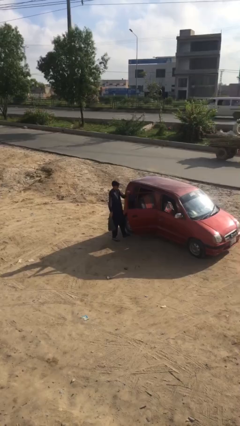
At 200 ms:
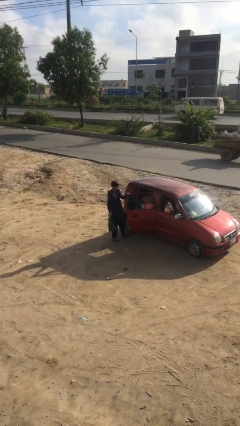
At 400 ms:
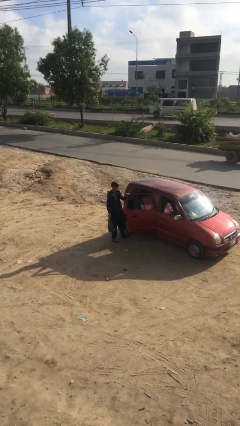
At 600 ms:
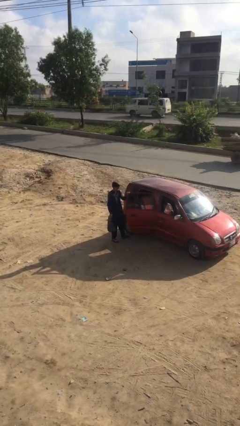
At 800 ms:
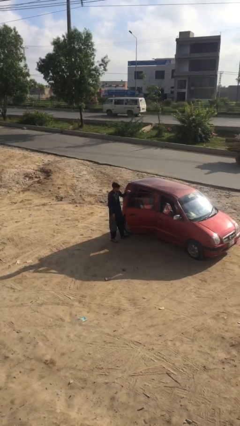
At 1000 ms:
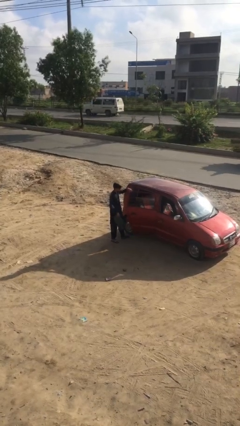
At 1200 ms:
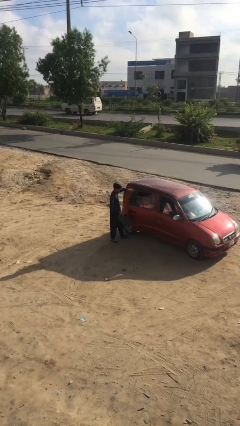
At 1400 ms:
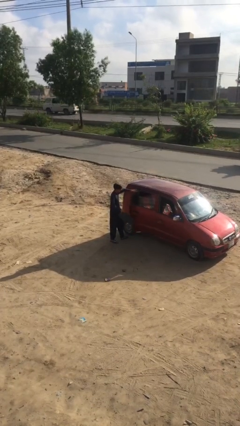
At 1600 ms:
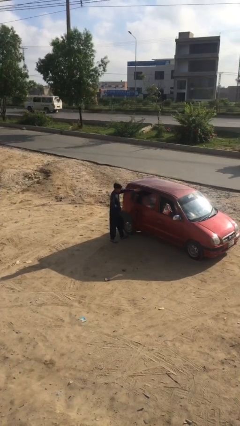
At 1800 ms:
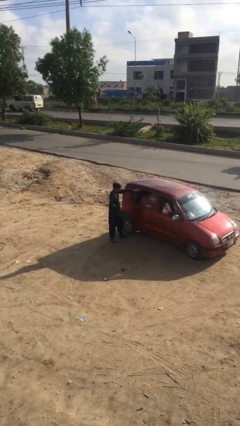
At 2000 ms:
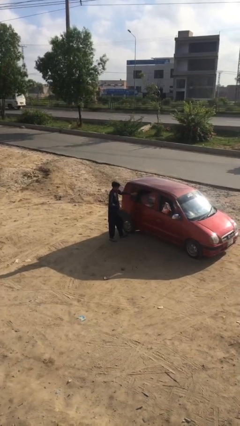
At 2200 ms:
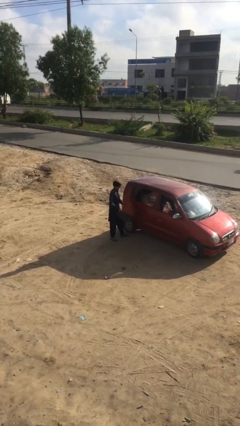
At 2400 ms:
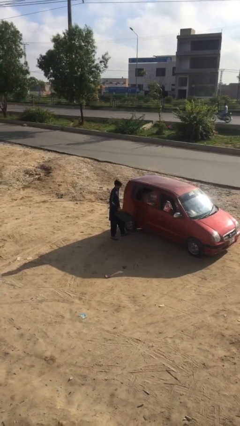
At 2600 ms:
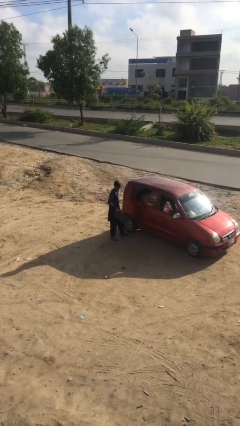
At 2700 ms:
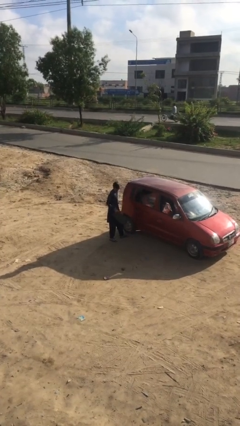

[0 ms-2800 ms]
person closes car door

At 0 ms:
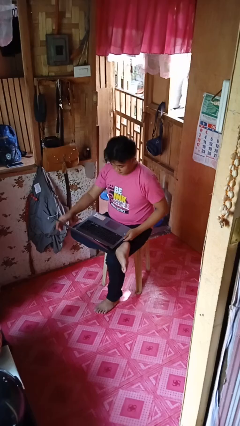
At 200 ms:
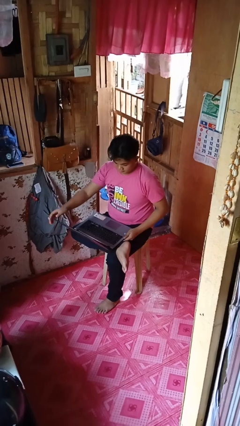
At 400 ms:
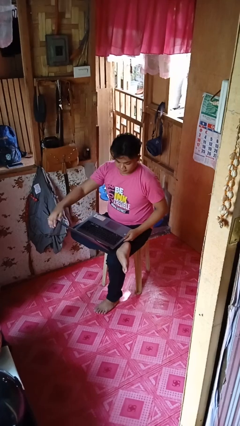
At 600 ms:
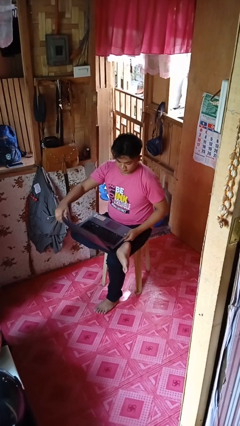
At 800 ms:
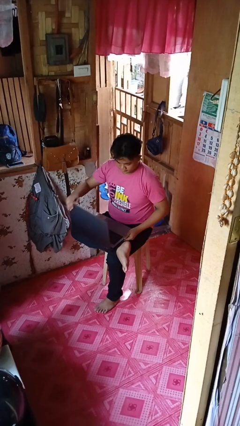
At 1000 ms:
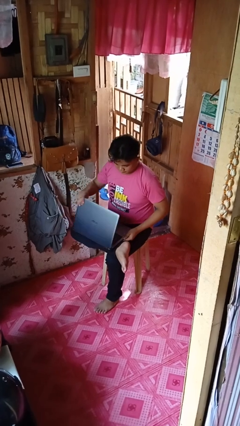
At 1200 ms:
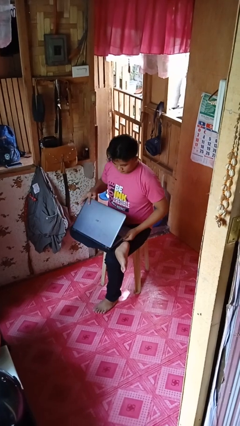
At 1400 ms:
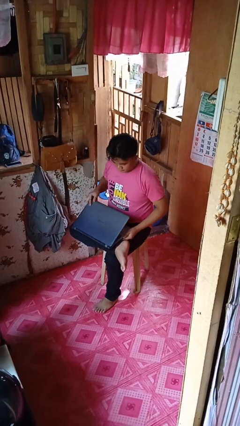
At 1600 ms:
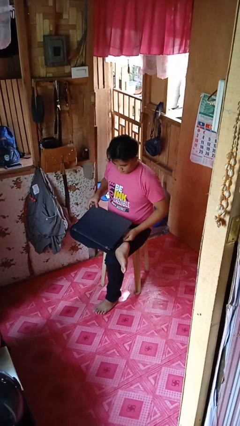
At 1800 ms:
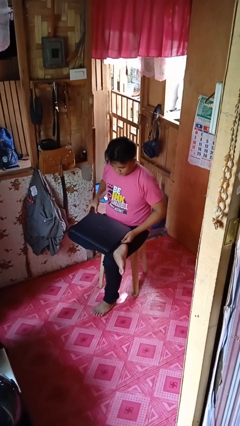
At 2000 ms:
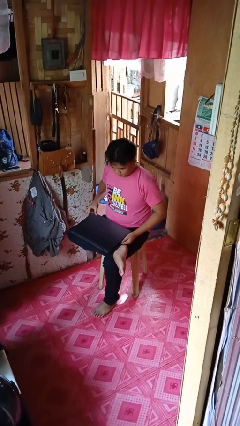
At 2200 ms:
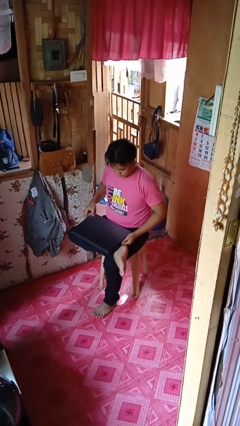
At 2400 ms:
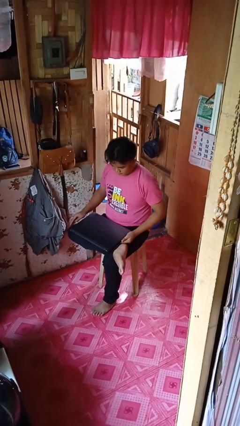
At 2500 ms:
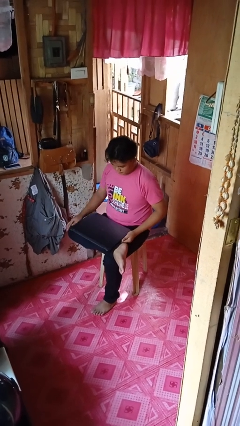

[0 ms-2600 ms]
person closes laptop

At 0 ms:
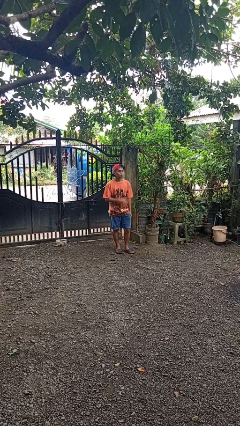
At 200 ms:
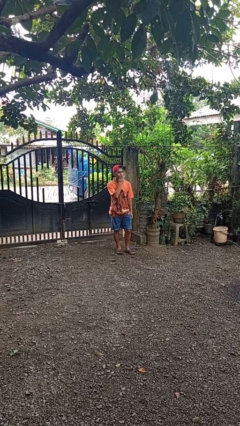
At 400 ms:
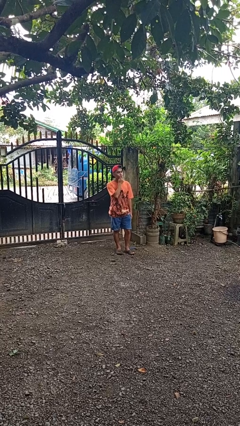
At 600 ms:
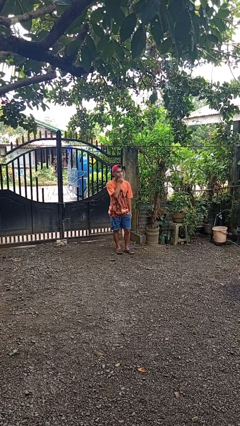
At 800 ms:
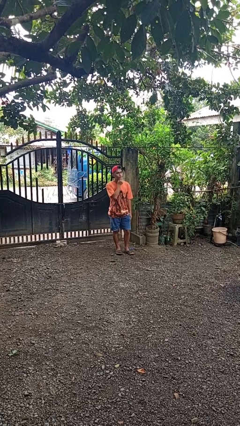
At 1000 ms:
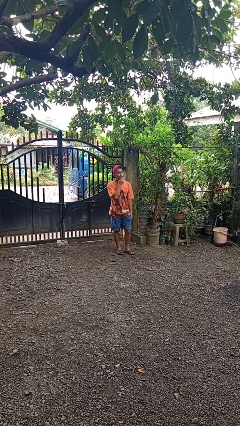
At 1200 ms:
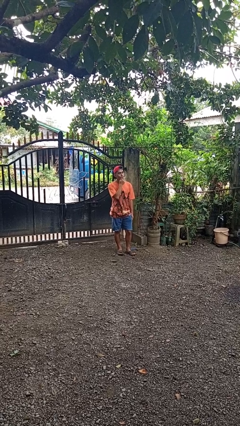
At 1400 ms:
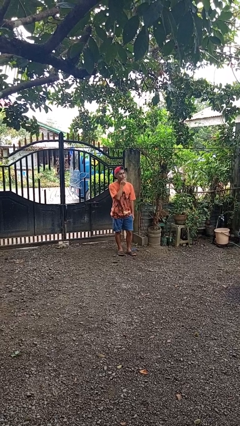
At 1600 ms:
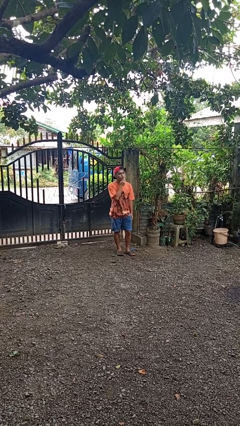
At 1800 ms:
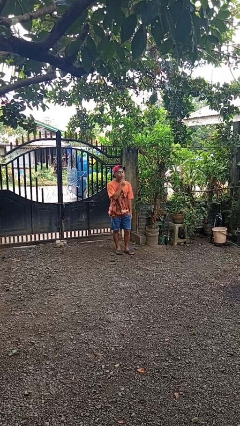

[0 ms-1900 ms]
person strokes chin

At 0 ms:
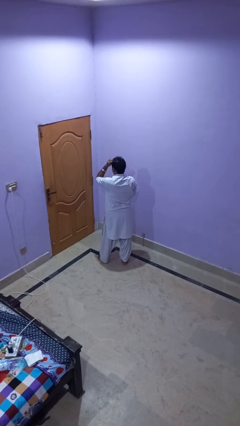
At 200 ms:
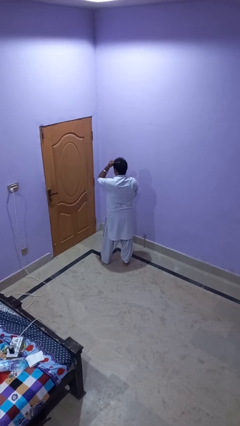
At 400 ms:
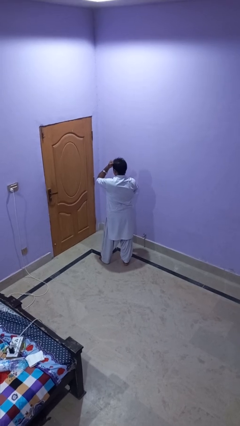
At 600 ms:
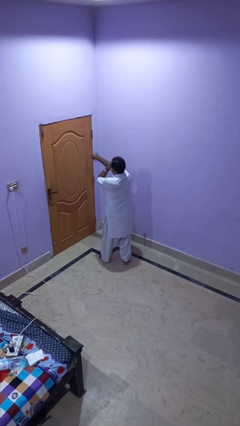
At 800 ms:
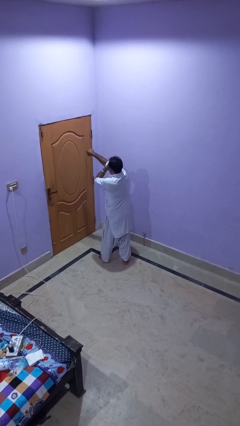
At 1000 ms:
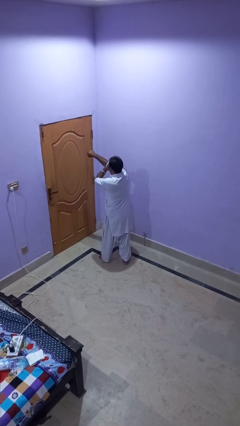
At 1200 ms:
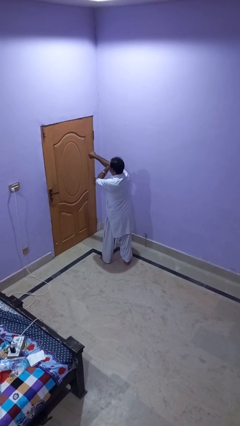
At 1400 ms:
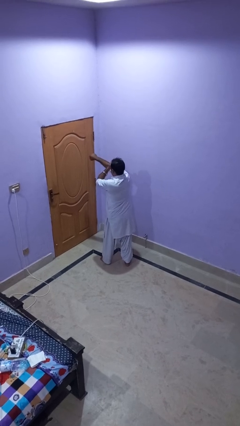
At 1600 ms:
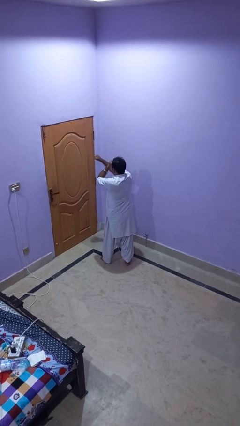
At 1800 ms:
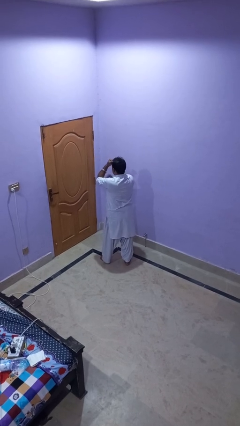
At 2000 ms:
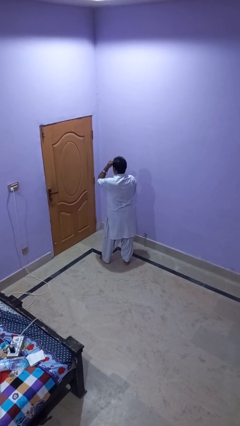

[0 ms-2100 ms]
person punches

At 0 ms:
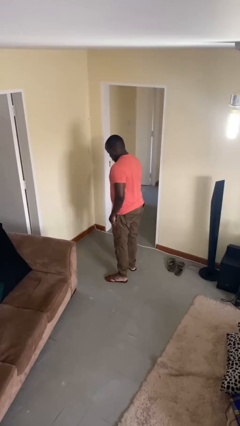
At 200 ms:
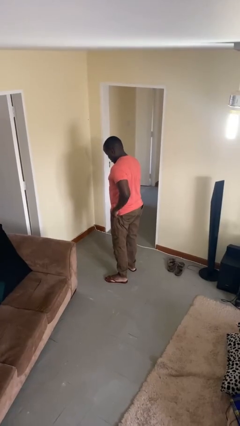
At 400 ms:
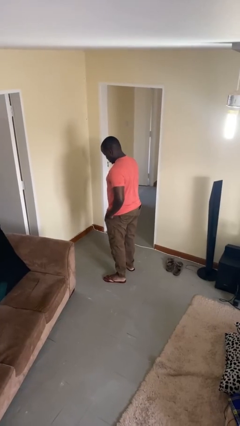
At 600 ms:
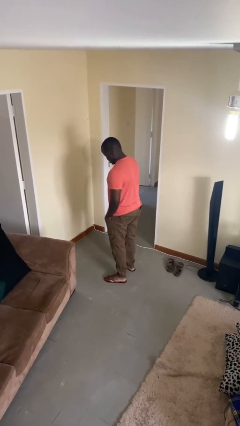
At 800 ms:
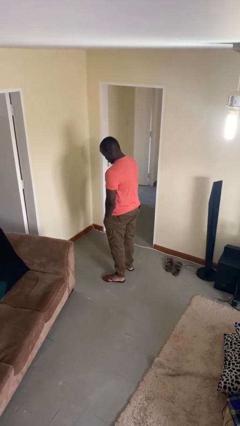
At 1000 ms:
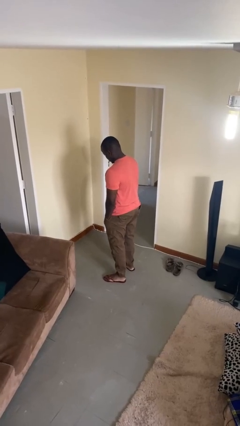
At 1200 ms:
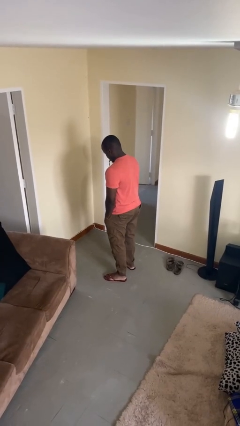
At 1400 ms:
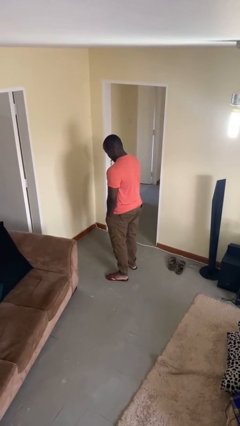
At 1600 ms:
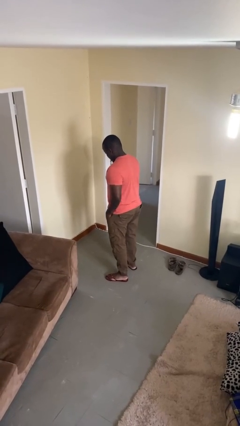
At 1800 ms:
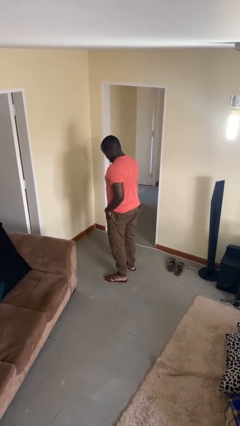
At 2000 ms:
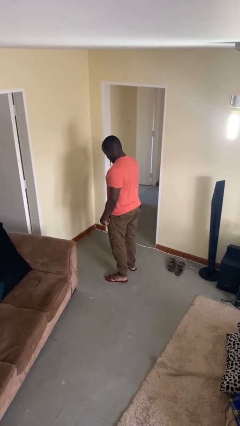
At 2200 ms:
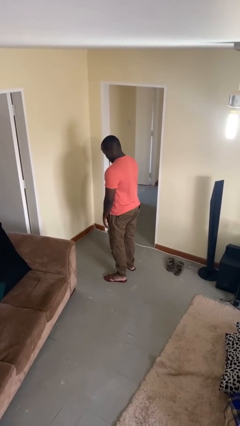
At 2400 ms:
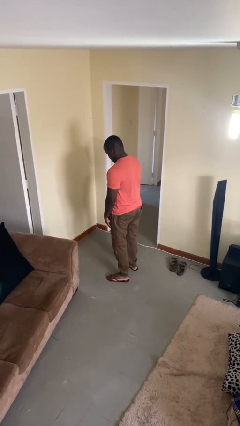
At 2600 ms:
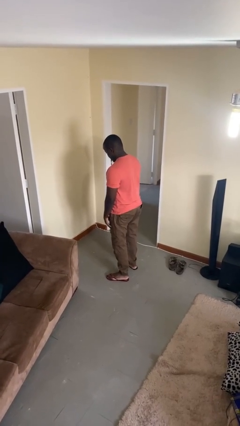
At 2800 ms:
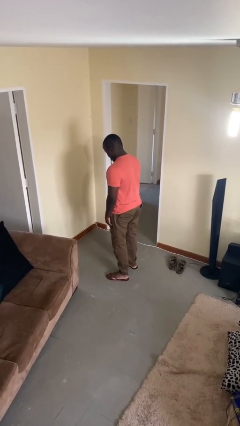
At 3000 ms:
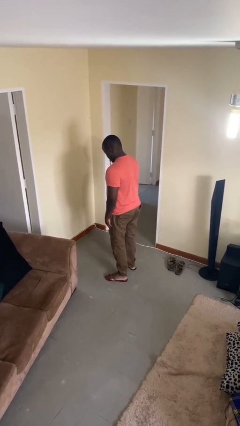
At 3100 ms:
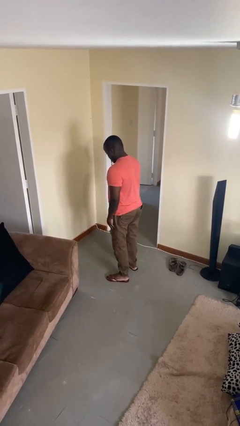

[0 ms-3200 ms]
person puts hands in back pockets

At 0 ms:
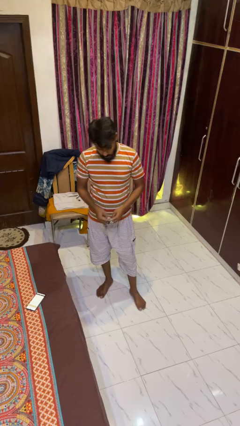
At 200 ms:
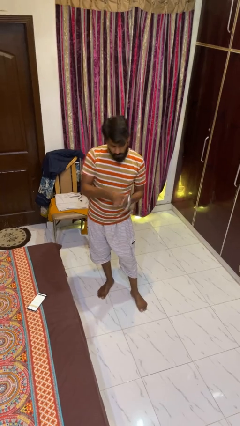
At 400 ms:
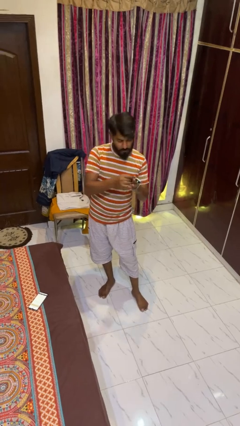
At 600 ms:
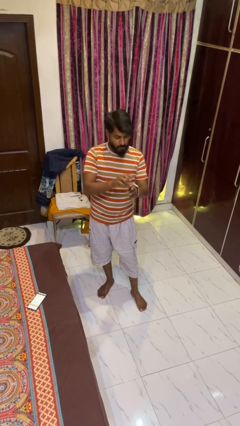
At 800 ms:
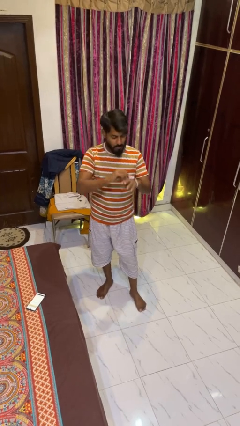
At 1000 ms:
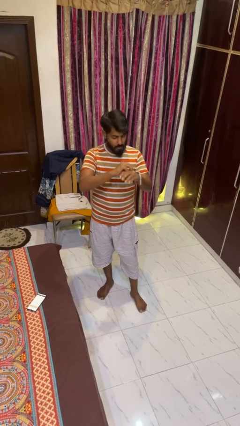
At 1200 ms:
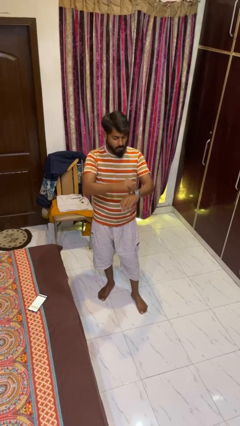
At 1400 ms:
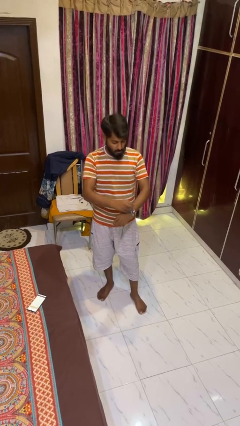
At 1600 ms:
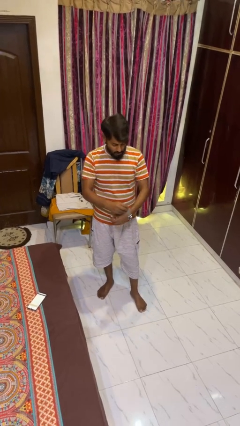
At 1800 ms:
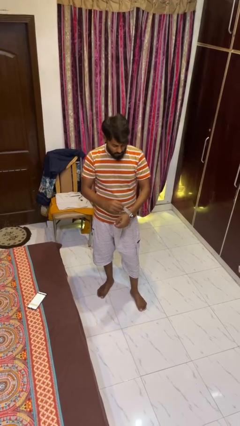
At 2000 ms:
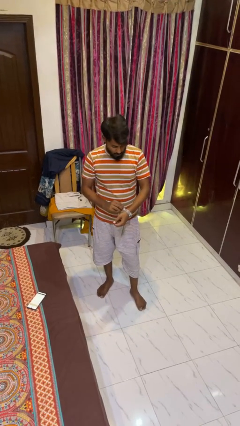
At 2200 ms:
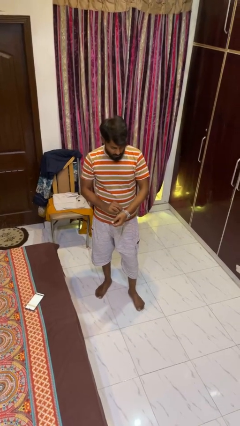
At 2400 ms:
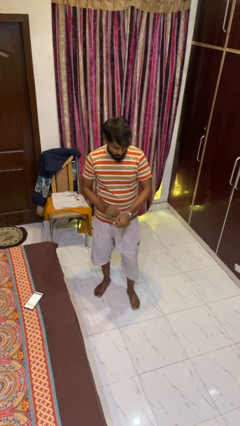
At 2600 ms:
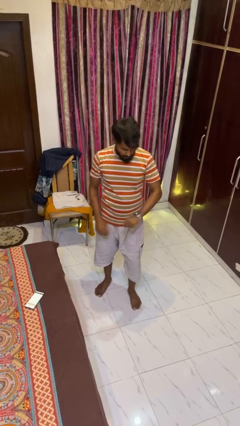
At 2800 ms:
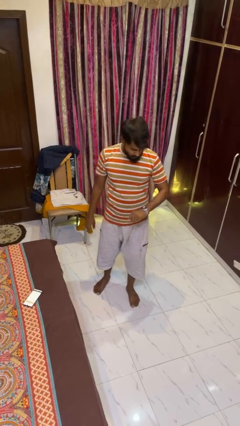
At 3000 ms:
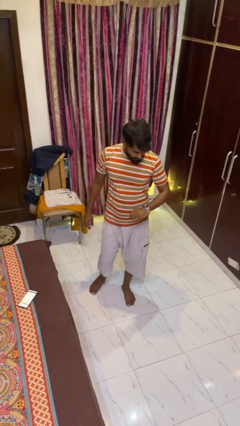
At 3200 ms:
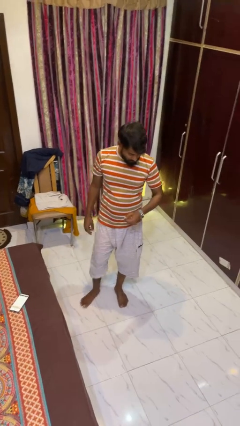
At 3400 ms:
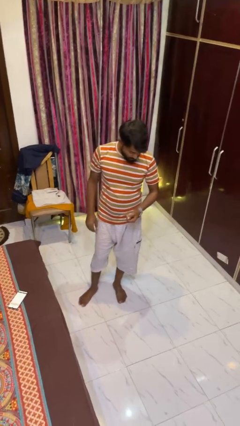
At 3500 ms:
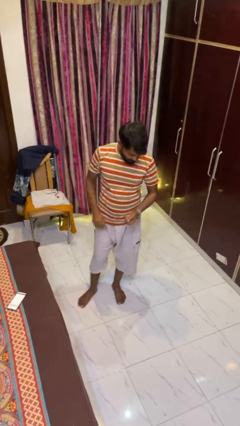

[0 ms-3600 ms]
person puts on wristwatch

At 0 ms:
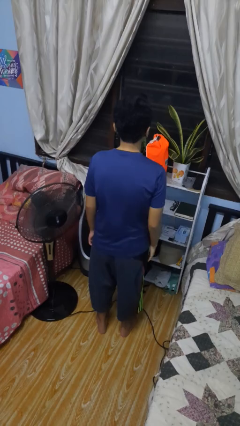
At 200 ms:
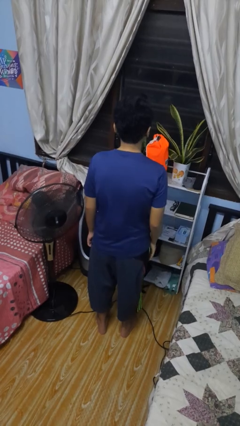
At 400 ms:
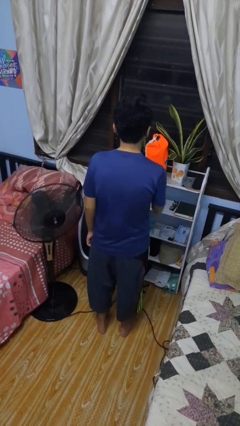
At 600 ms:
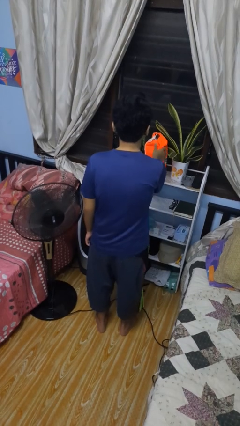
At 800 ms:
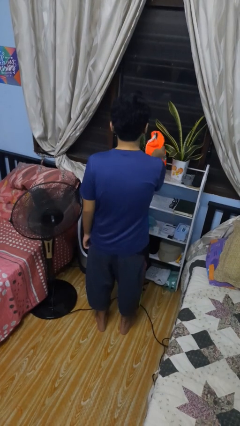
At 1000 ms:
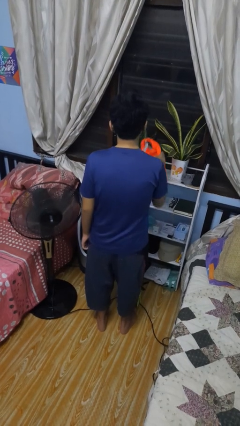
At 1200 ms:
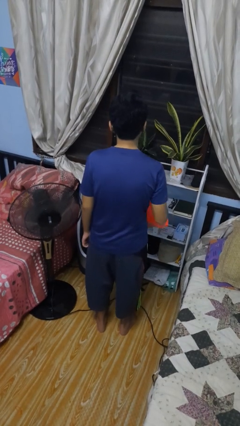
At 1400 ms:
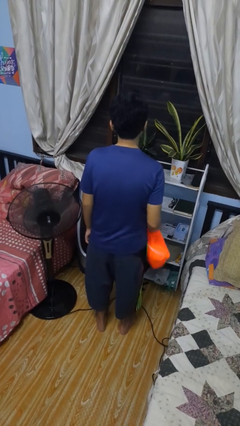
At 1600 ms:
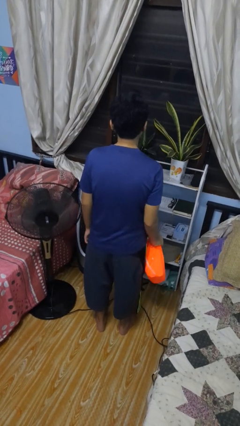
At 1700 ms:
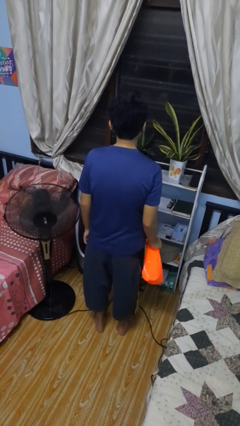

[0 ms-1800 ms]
person picks up object from countertop
